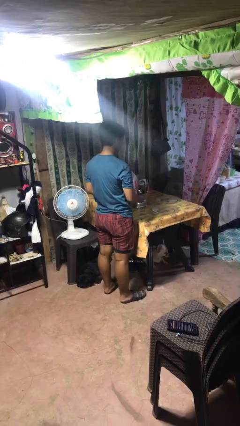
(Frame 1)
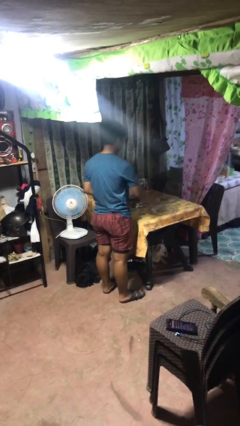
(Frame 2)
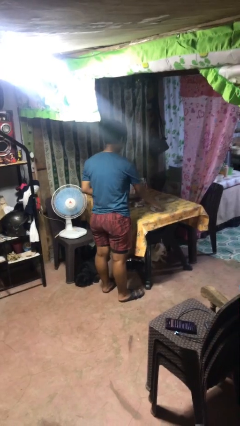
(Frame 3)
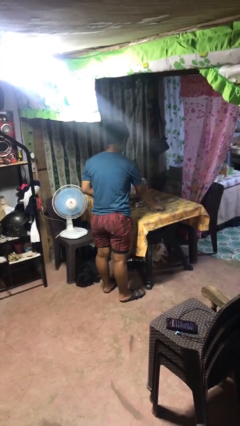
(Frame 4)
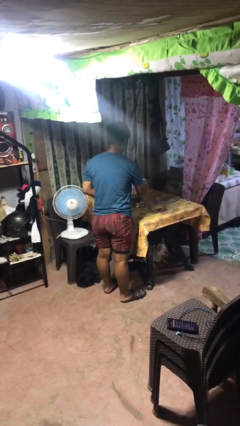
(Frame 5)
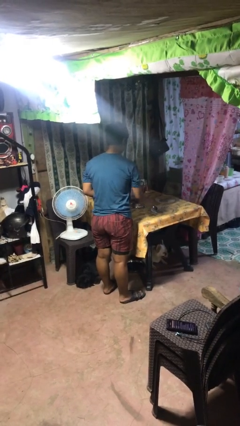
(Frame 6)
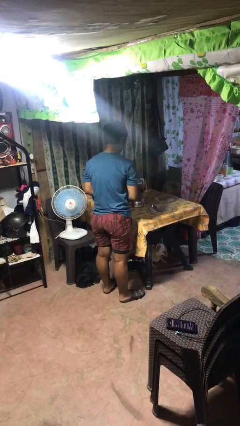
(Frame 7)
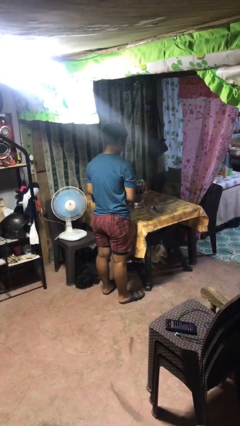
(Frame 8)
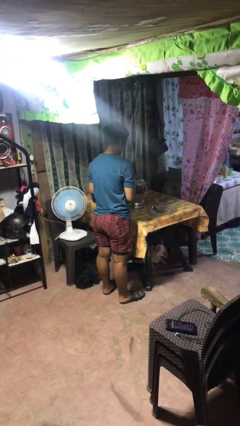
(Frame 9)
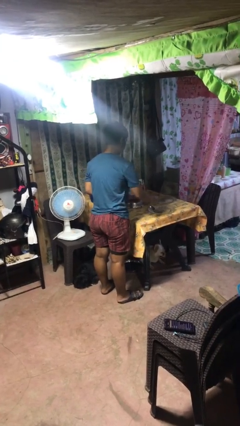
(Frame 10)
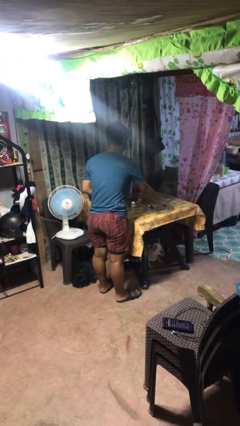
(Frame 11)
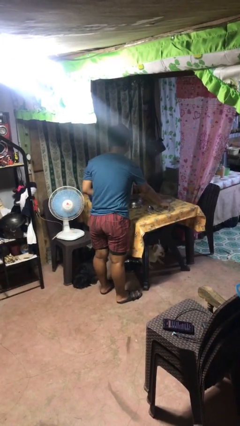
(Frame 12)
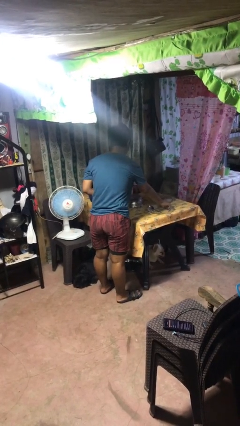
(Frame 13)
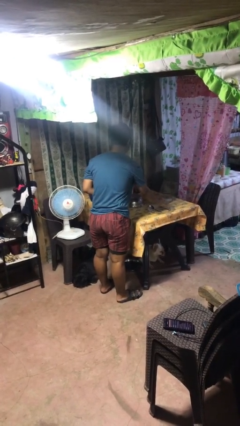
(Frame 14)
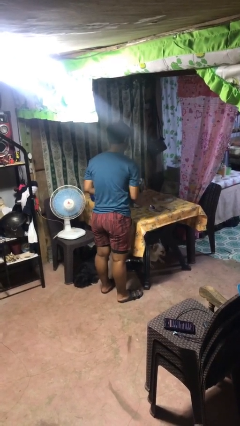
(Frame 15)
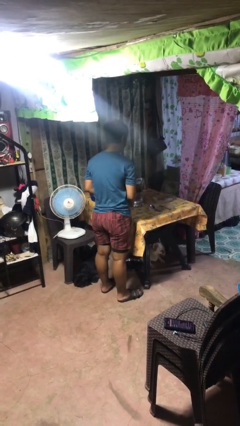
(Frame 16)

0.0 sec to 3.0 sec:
person sets table

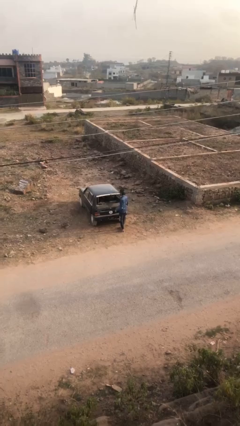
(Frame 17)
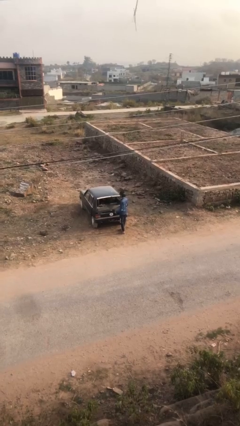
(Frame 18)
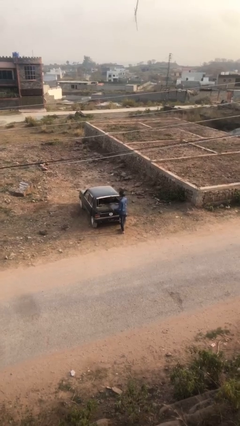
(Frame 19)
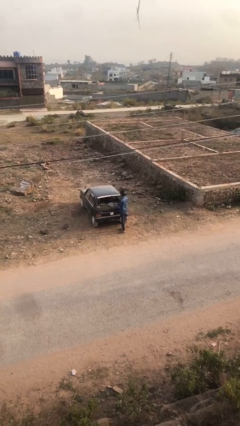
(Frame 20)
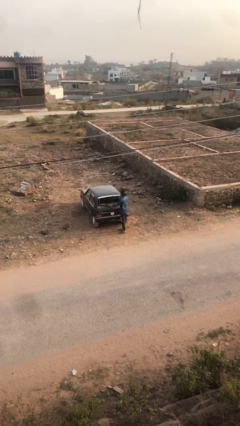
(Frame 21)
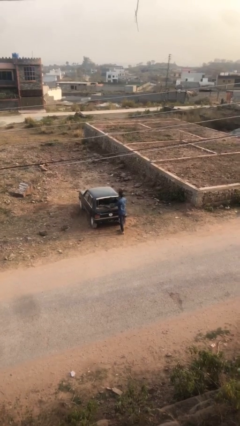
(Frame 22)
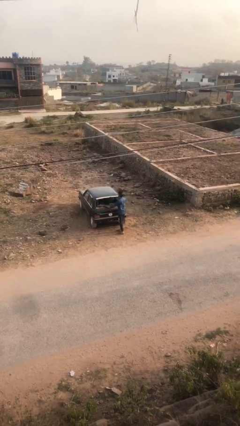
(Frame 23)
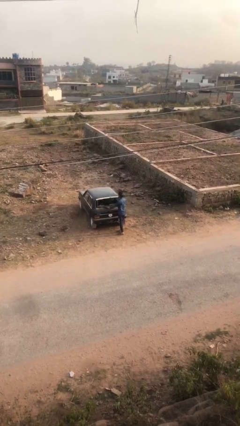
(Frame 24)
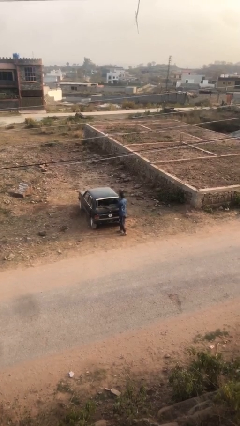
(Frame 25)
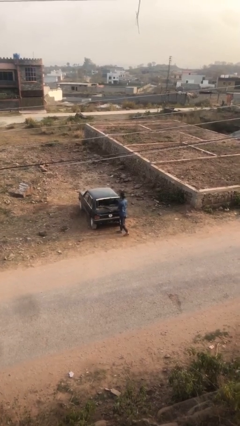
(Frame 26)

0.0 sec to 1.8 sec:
person loads car

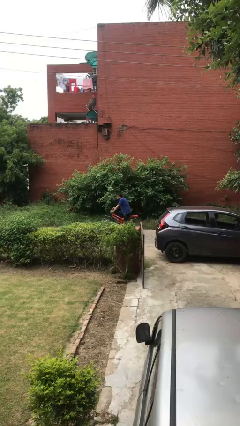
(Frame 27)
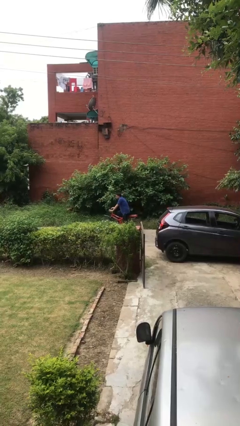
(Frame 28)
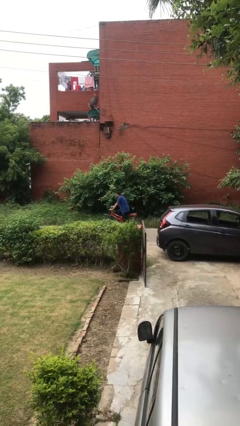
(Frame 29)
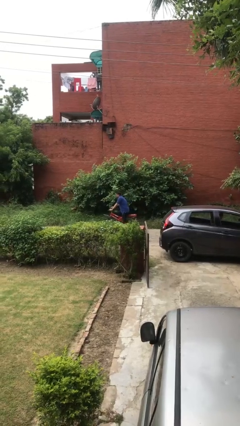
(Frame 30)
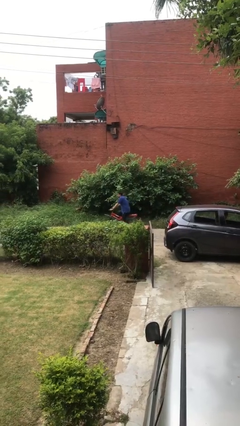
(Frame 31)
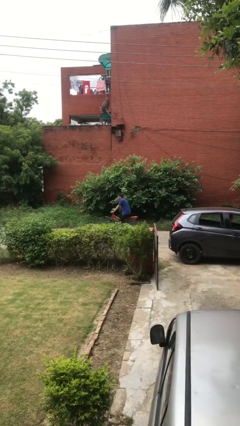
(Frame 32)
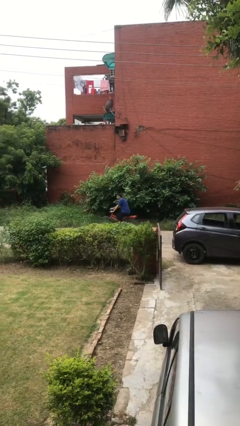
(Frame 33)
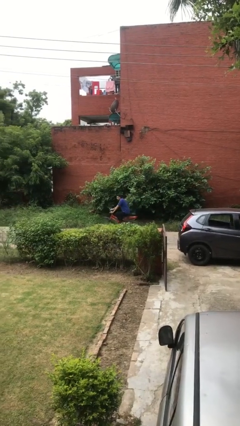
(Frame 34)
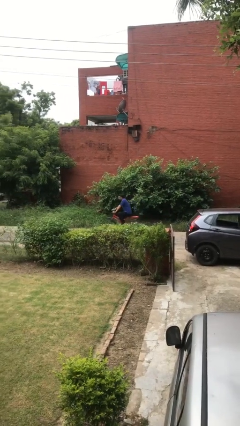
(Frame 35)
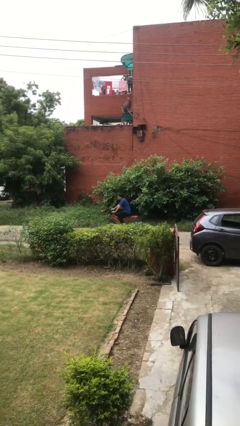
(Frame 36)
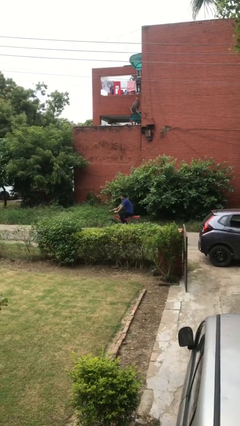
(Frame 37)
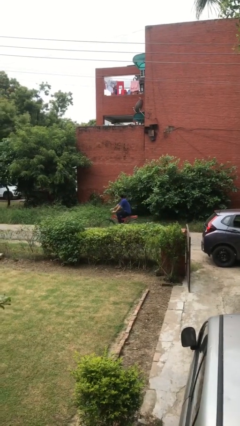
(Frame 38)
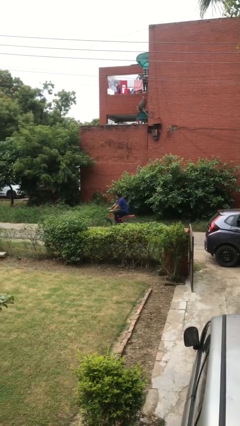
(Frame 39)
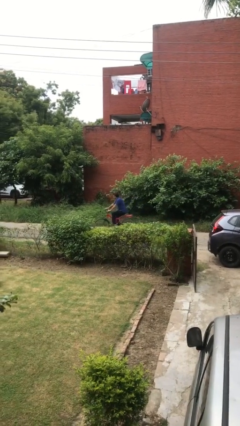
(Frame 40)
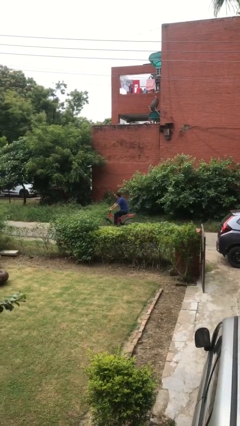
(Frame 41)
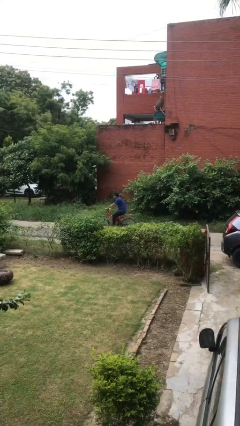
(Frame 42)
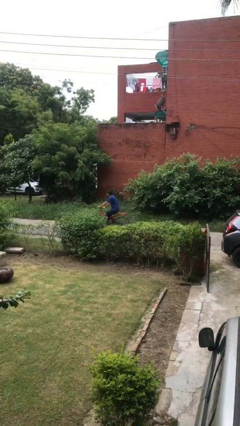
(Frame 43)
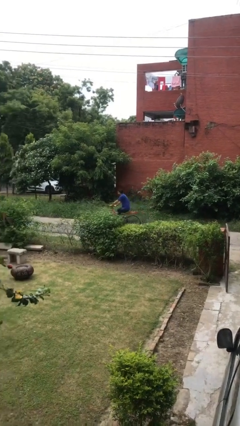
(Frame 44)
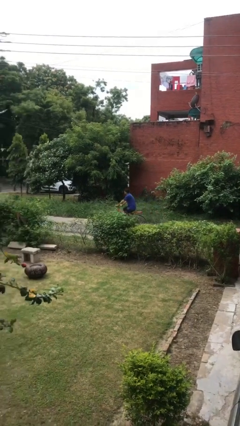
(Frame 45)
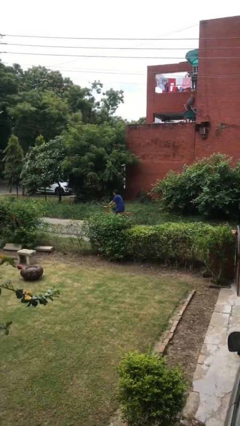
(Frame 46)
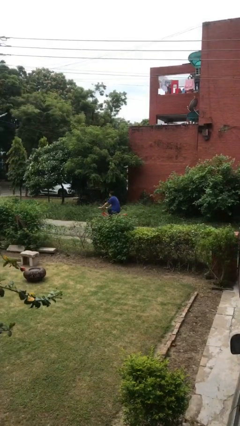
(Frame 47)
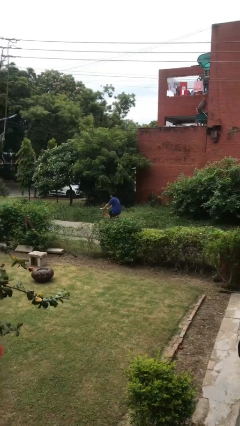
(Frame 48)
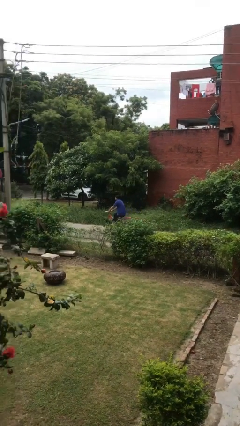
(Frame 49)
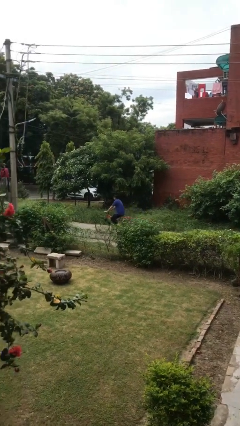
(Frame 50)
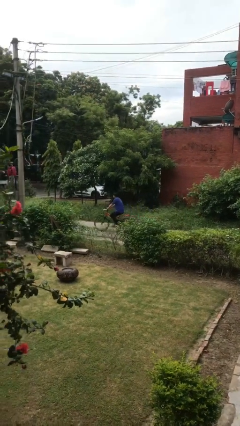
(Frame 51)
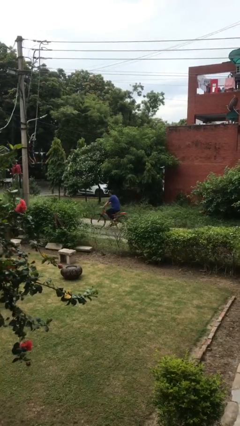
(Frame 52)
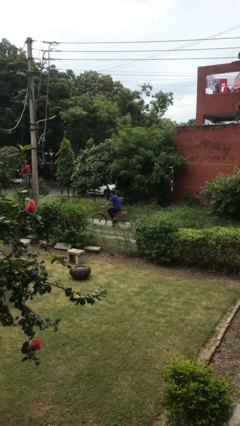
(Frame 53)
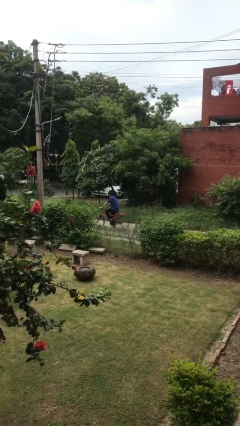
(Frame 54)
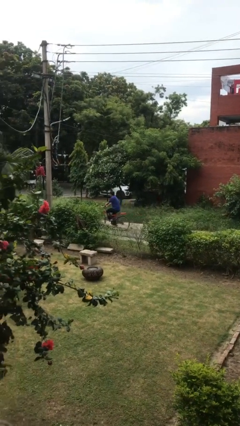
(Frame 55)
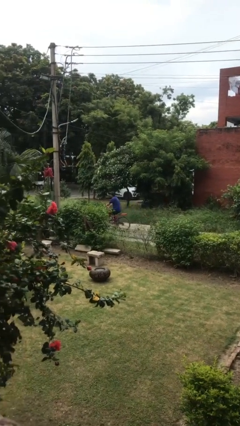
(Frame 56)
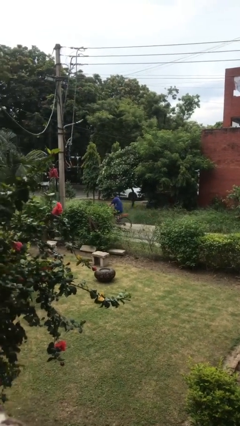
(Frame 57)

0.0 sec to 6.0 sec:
person rides bicycle

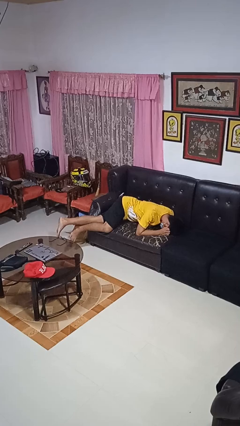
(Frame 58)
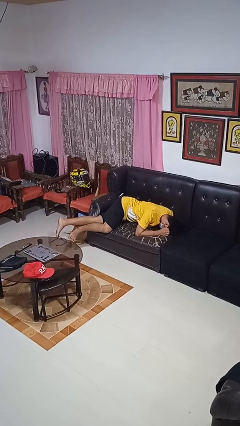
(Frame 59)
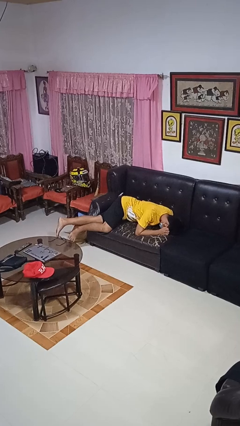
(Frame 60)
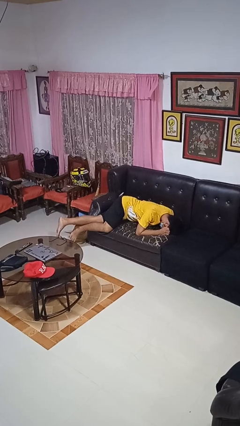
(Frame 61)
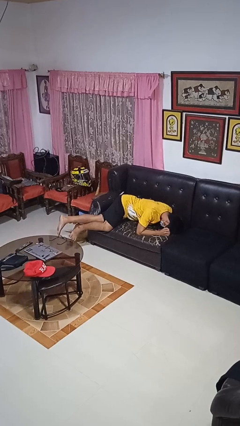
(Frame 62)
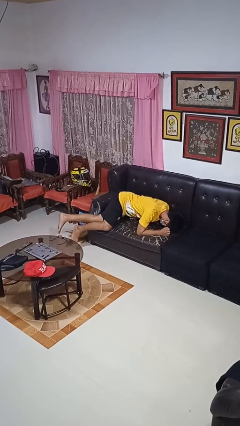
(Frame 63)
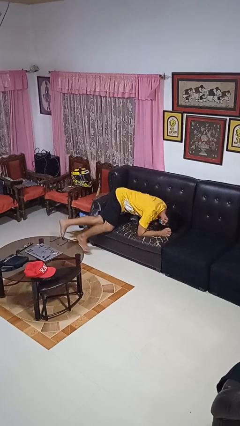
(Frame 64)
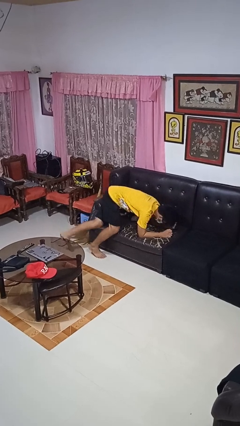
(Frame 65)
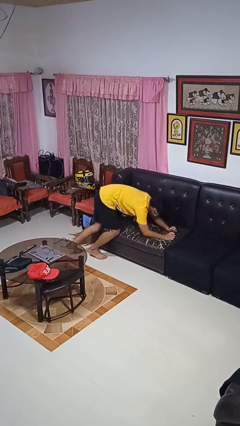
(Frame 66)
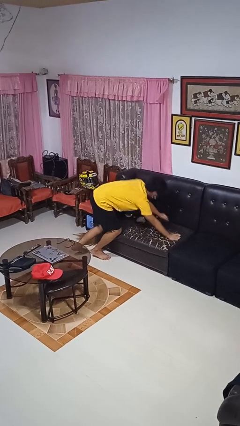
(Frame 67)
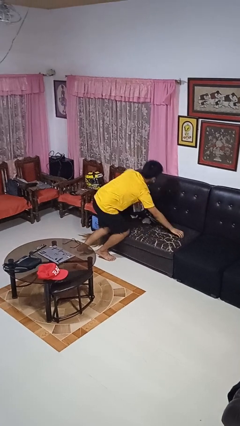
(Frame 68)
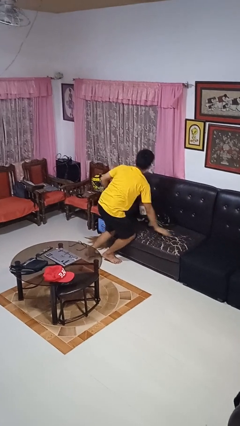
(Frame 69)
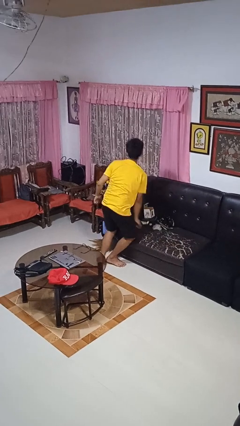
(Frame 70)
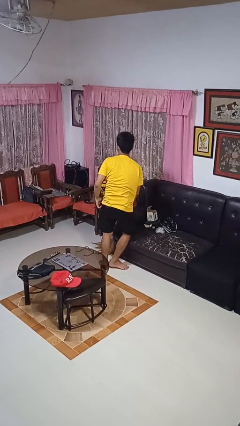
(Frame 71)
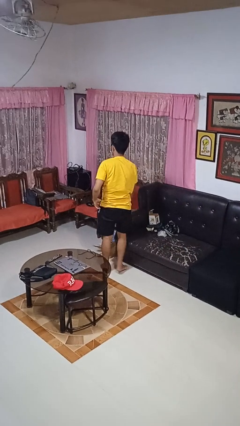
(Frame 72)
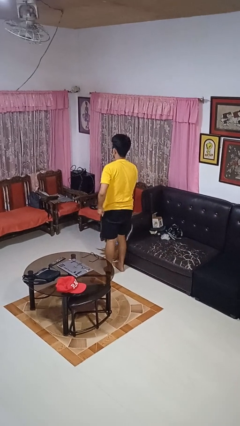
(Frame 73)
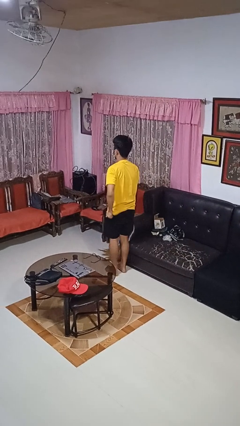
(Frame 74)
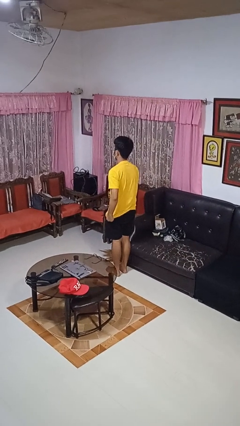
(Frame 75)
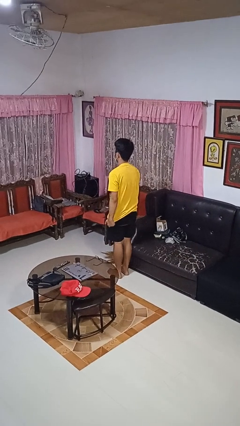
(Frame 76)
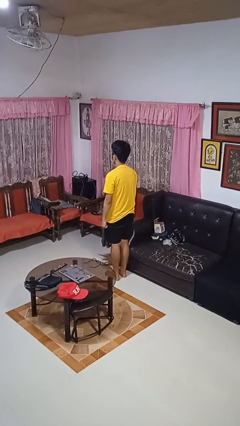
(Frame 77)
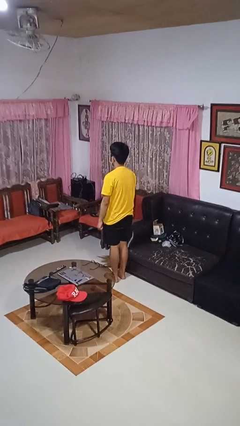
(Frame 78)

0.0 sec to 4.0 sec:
person stands up

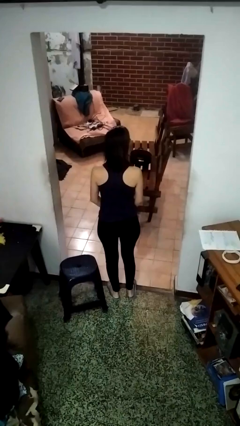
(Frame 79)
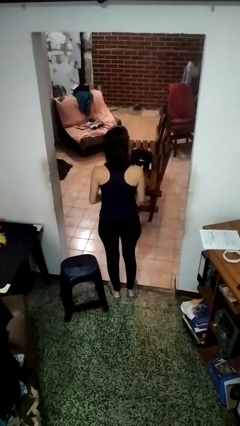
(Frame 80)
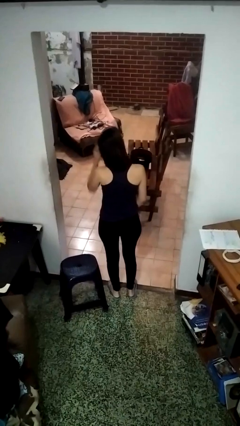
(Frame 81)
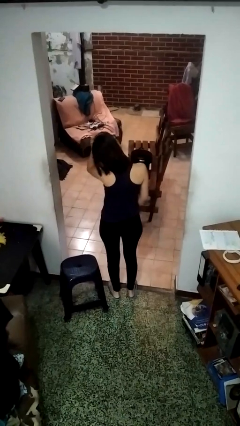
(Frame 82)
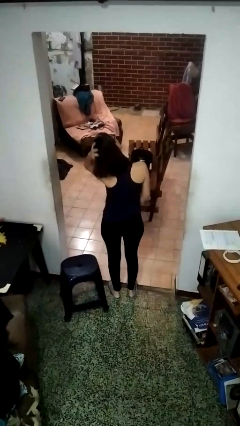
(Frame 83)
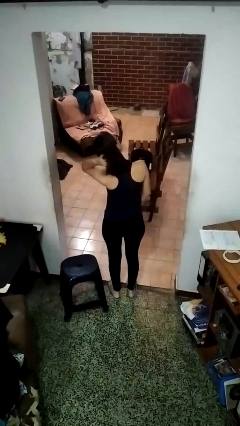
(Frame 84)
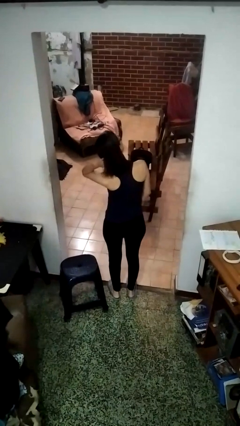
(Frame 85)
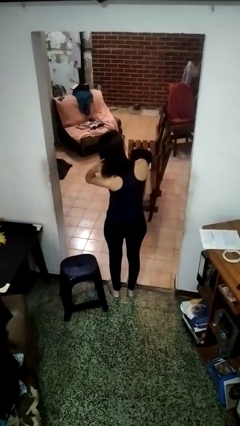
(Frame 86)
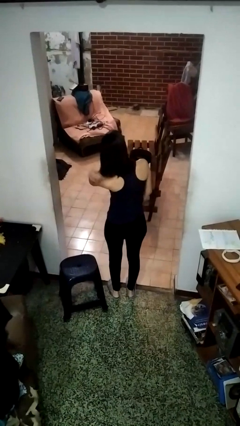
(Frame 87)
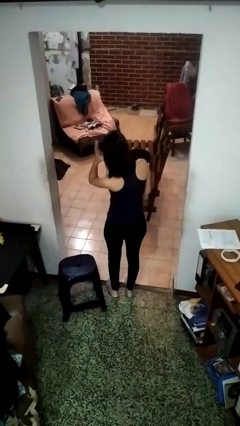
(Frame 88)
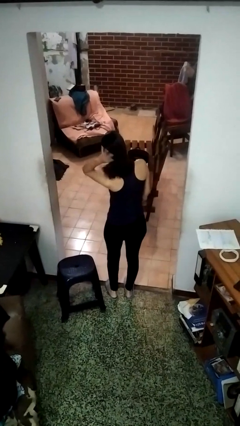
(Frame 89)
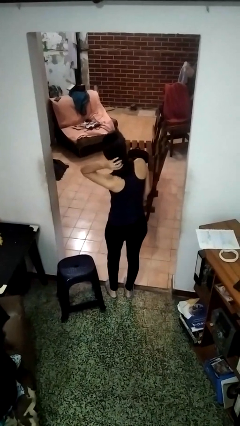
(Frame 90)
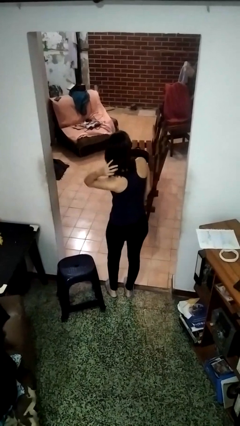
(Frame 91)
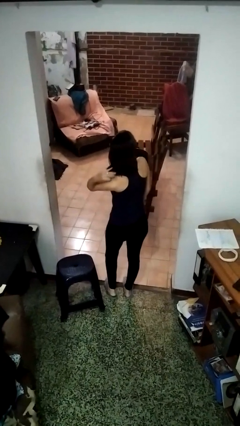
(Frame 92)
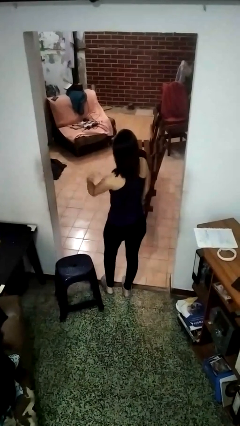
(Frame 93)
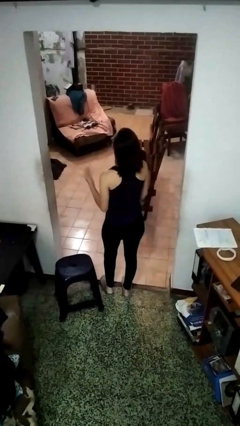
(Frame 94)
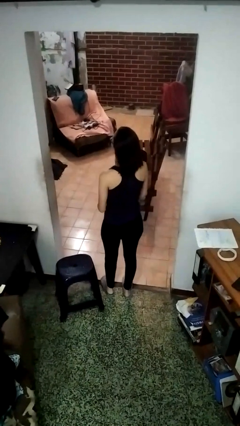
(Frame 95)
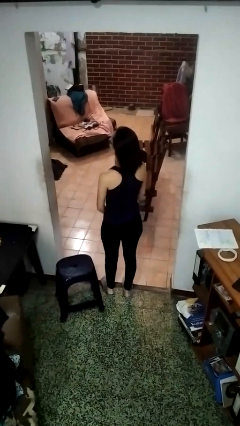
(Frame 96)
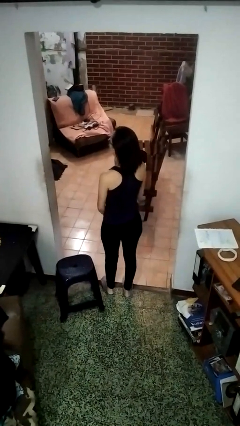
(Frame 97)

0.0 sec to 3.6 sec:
person strokes hair
